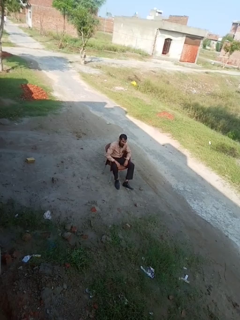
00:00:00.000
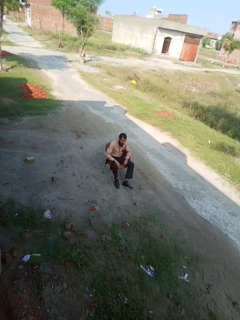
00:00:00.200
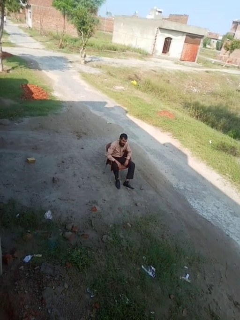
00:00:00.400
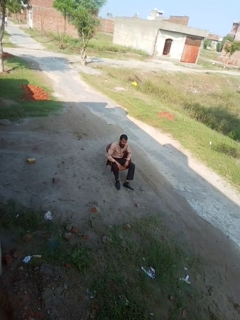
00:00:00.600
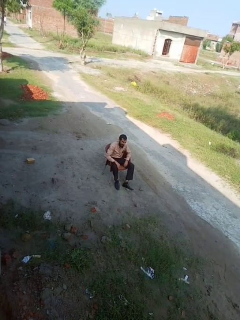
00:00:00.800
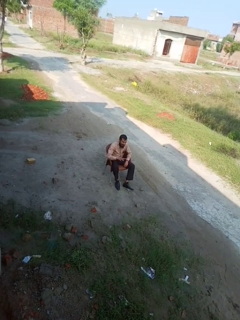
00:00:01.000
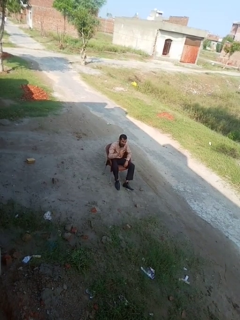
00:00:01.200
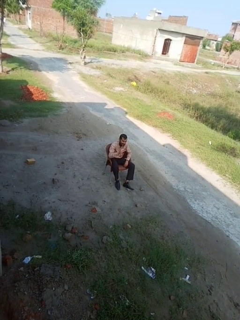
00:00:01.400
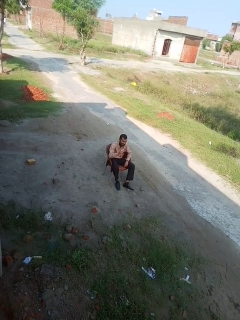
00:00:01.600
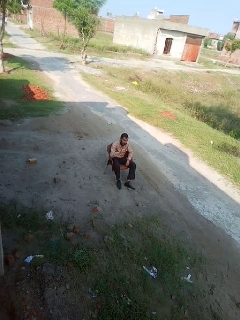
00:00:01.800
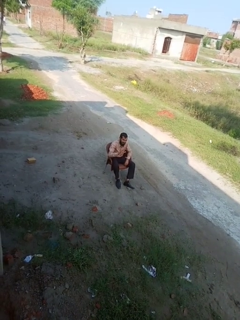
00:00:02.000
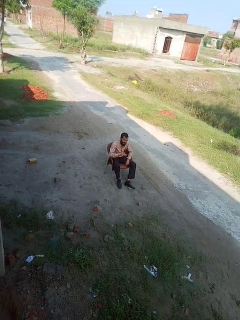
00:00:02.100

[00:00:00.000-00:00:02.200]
person gestures number five

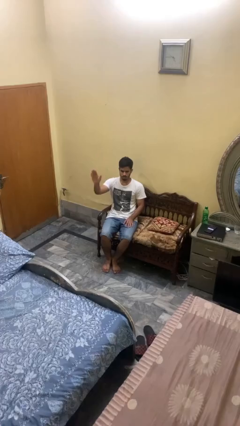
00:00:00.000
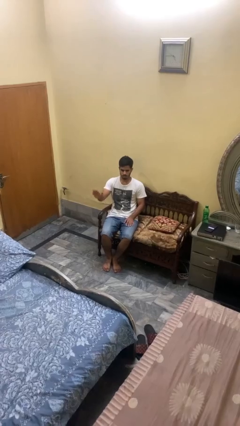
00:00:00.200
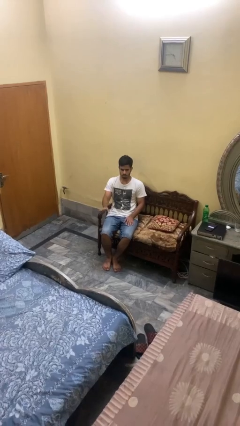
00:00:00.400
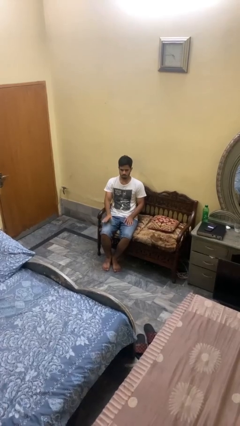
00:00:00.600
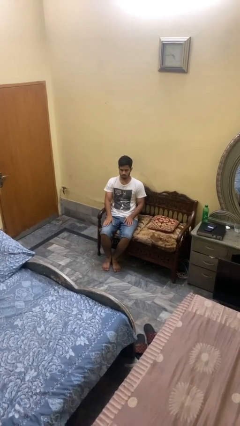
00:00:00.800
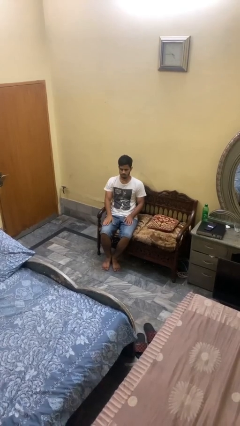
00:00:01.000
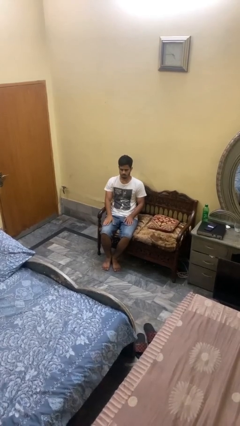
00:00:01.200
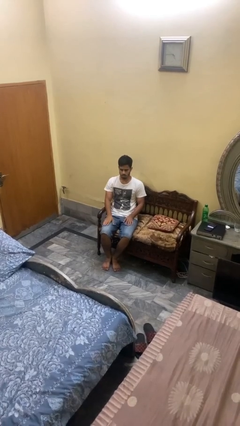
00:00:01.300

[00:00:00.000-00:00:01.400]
person gestures lower hand

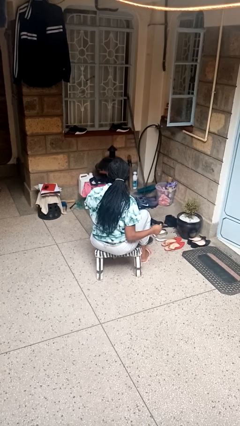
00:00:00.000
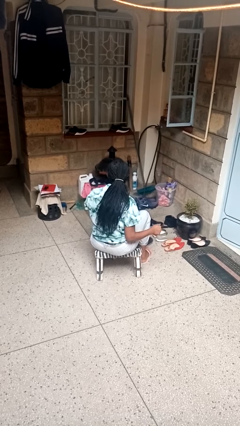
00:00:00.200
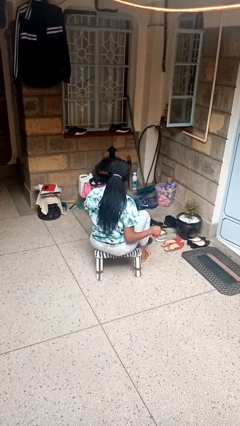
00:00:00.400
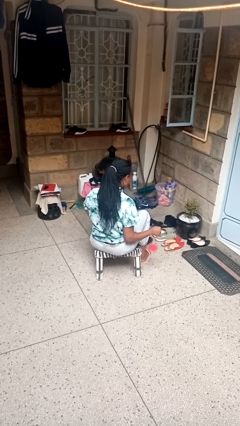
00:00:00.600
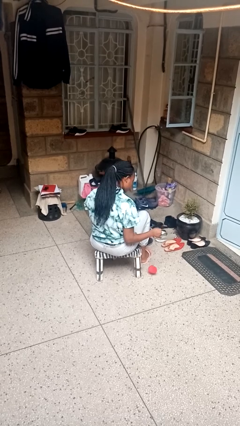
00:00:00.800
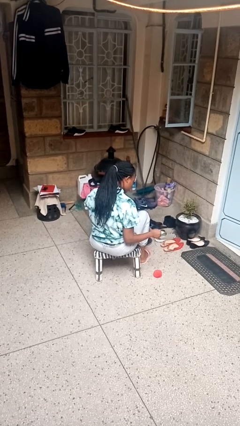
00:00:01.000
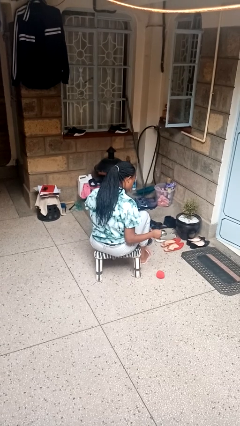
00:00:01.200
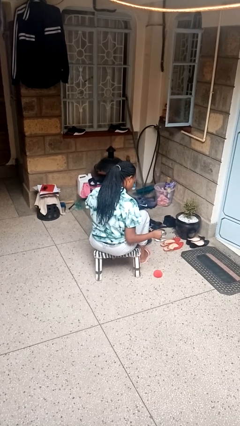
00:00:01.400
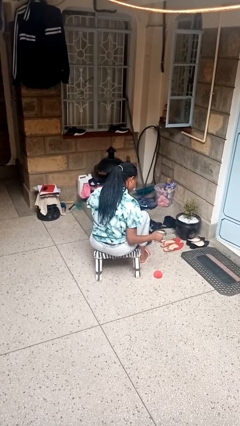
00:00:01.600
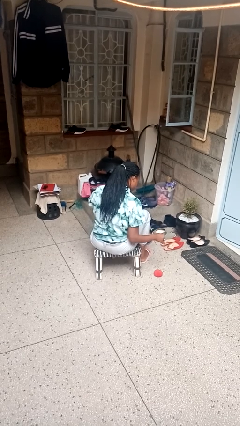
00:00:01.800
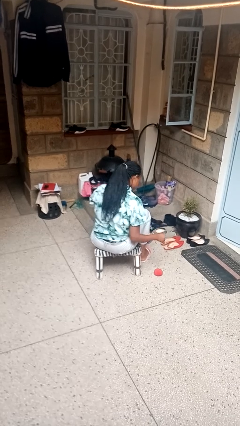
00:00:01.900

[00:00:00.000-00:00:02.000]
person drops object

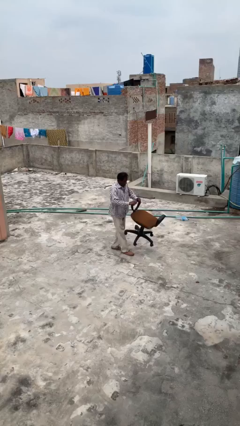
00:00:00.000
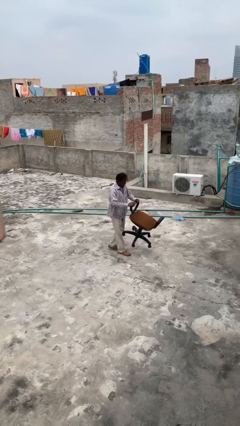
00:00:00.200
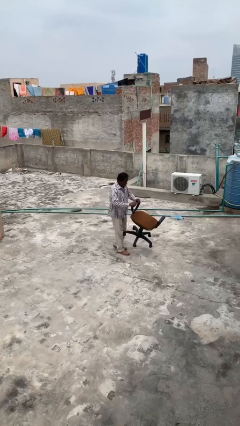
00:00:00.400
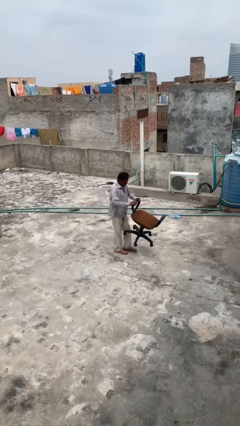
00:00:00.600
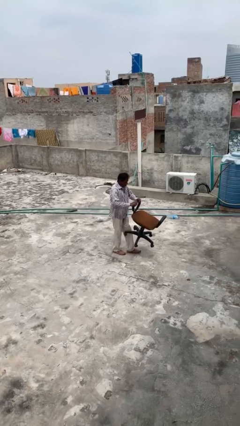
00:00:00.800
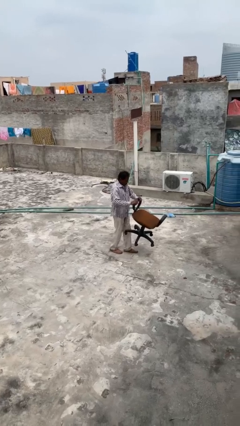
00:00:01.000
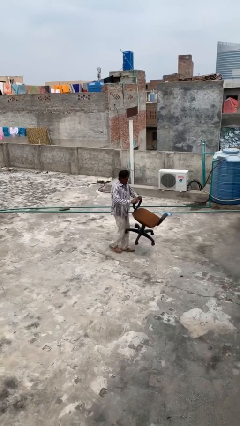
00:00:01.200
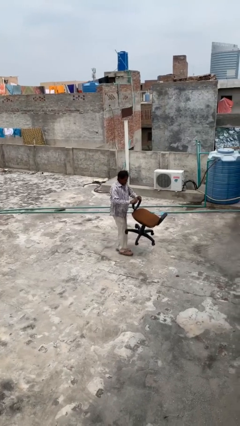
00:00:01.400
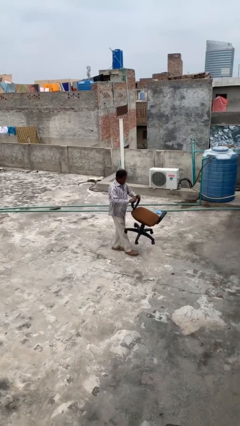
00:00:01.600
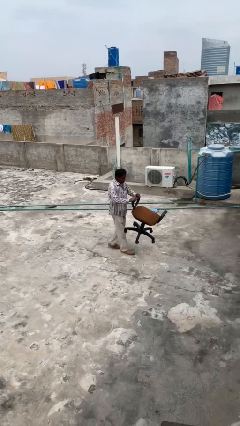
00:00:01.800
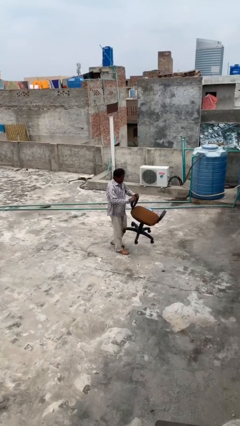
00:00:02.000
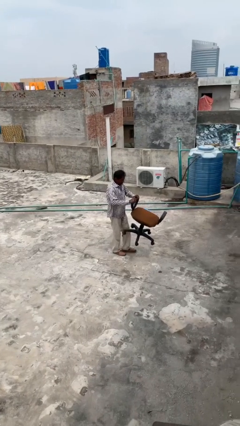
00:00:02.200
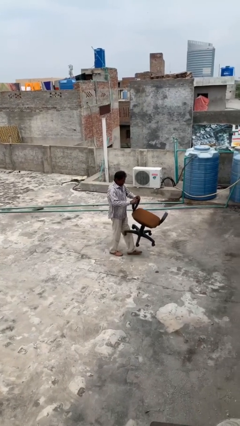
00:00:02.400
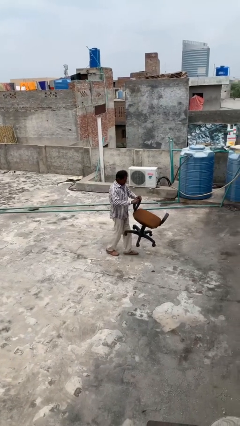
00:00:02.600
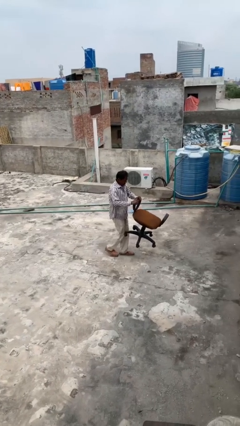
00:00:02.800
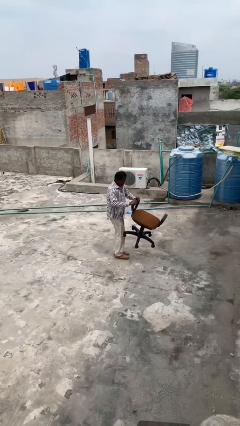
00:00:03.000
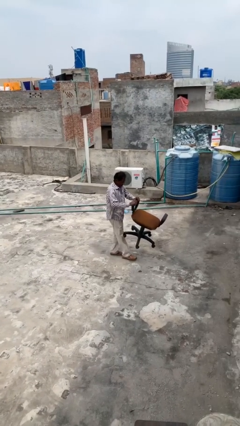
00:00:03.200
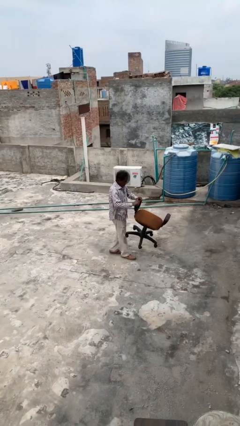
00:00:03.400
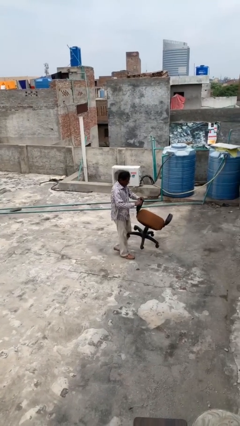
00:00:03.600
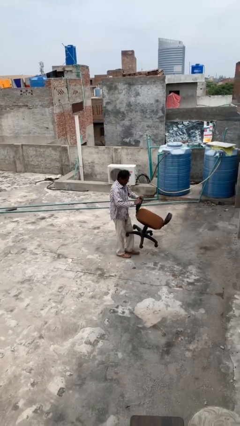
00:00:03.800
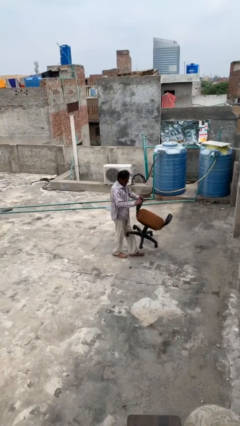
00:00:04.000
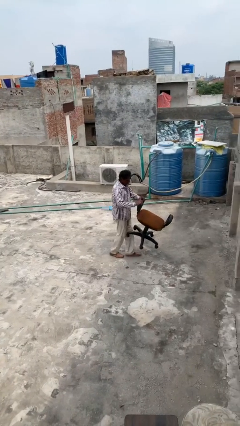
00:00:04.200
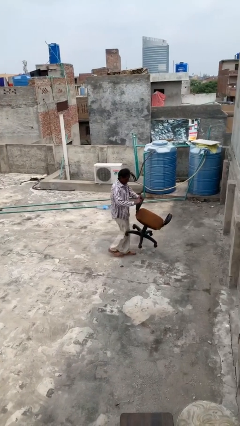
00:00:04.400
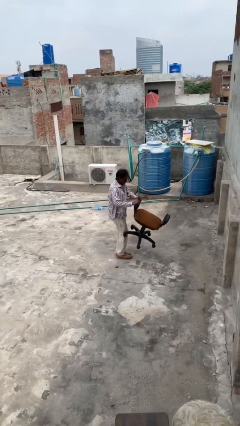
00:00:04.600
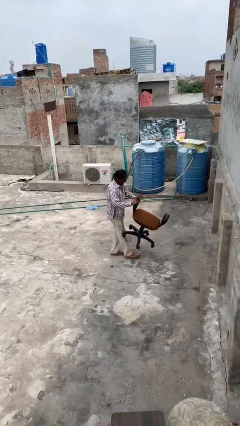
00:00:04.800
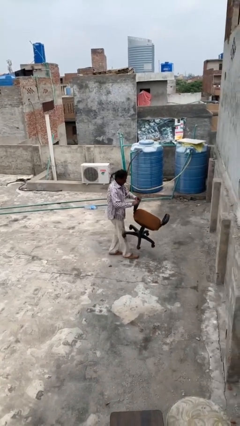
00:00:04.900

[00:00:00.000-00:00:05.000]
person carries heavy object

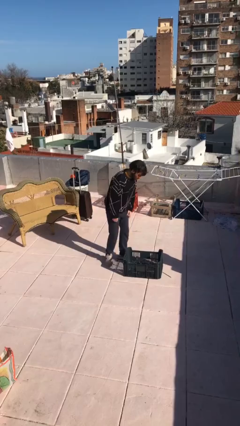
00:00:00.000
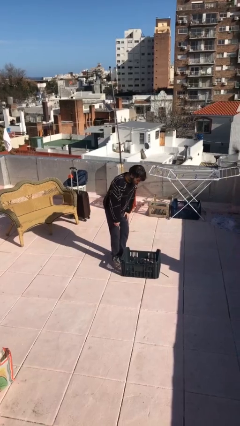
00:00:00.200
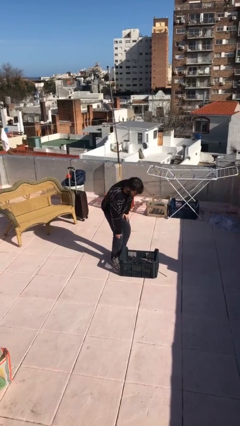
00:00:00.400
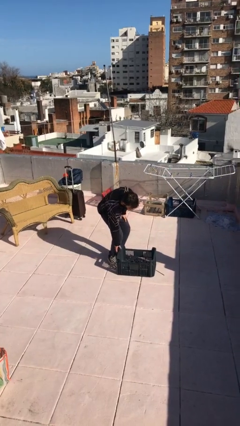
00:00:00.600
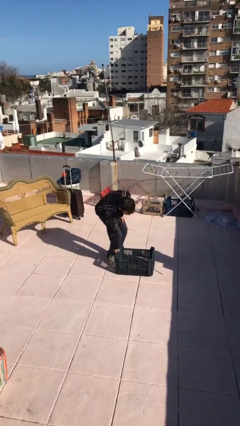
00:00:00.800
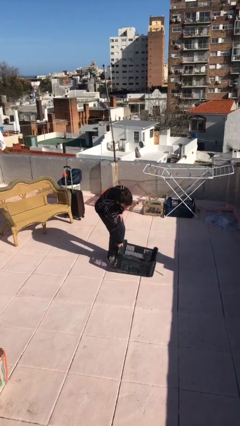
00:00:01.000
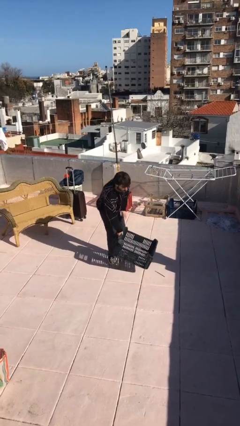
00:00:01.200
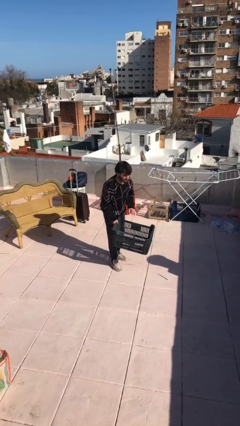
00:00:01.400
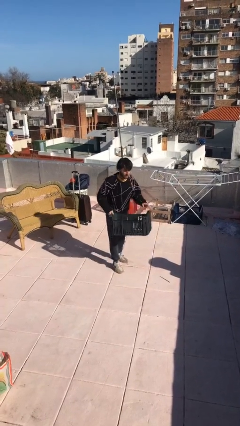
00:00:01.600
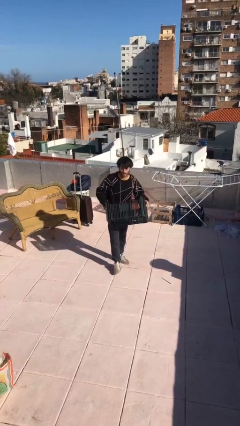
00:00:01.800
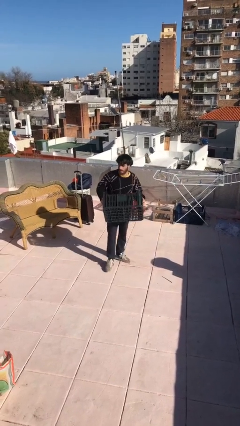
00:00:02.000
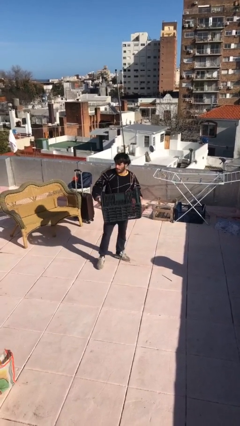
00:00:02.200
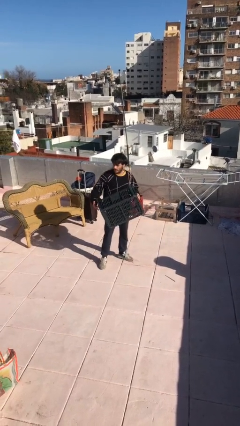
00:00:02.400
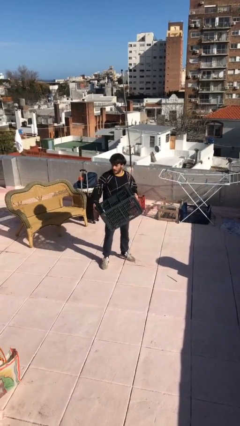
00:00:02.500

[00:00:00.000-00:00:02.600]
person picks up object from floor

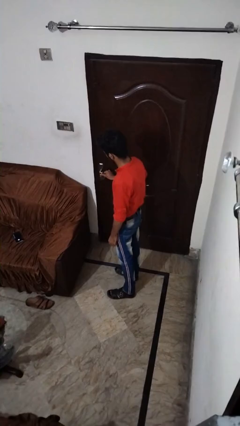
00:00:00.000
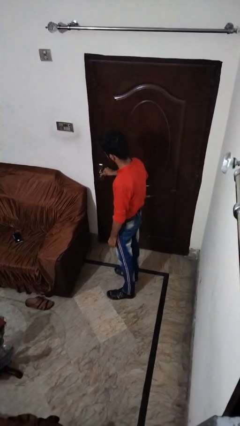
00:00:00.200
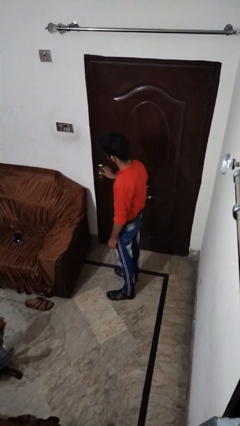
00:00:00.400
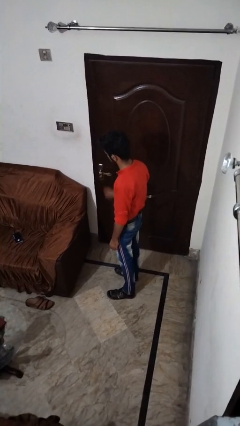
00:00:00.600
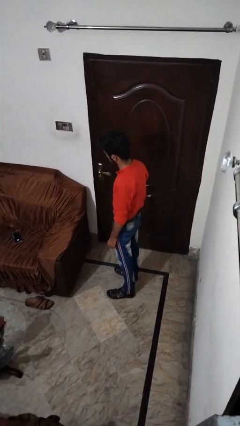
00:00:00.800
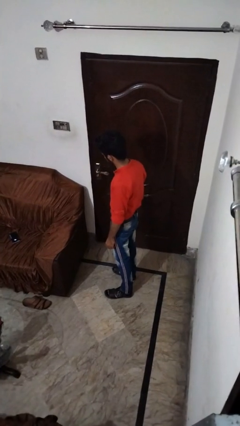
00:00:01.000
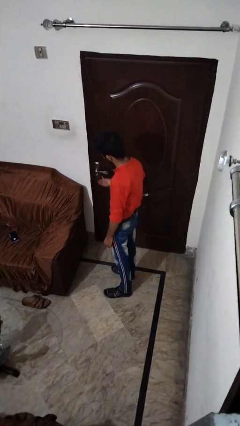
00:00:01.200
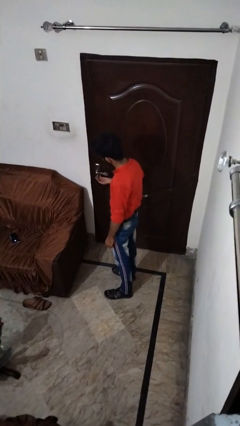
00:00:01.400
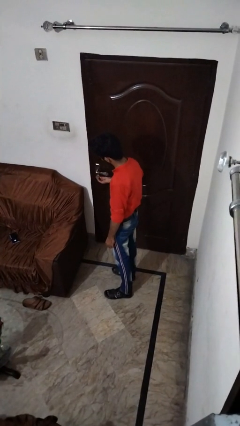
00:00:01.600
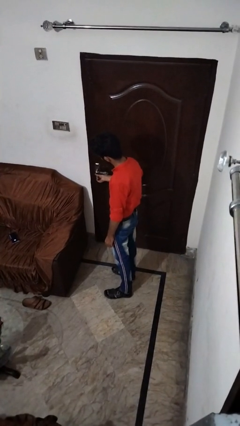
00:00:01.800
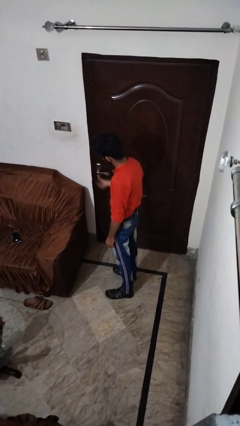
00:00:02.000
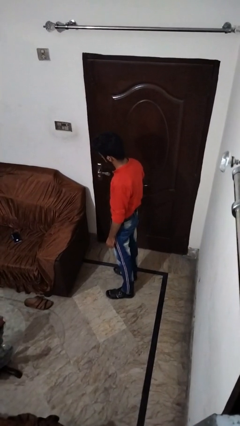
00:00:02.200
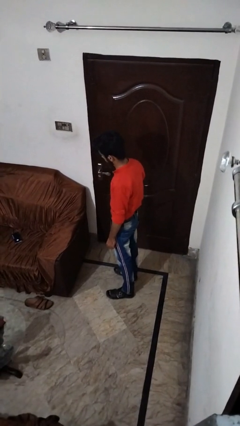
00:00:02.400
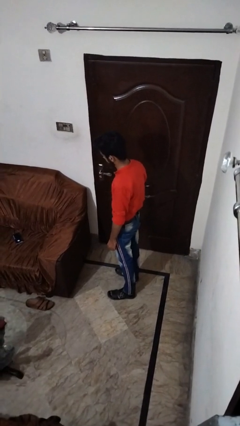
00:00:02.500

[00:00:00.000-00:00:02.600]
person locks door with keys

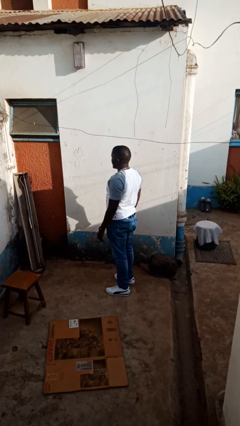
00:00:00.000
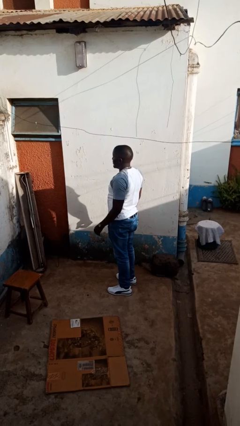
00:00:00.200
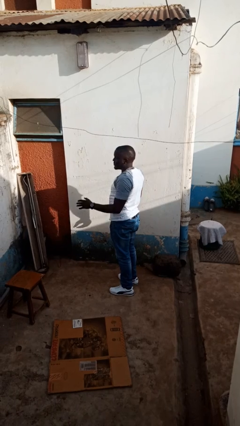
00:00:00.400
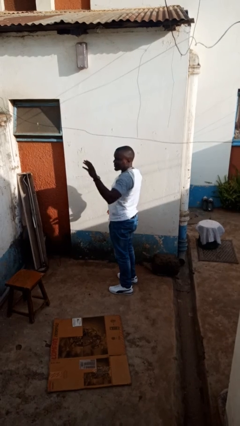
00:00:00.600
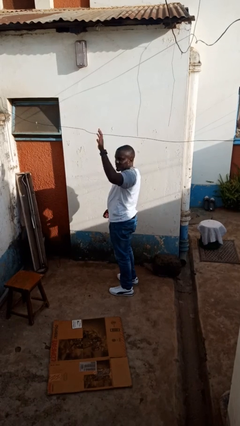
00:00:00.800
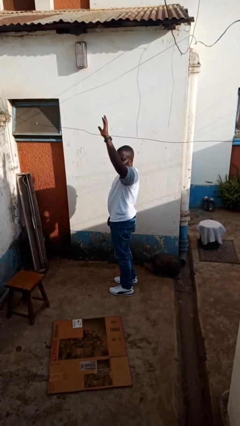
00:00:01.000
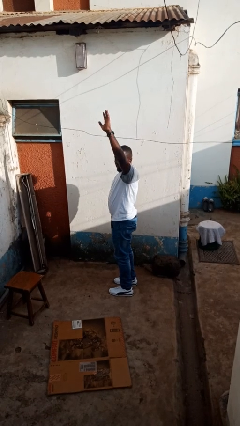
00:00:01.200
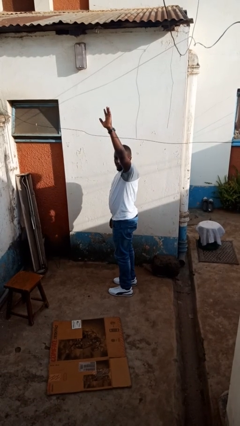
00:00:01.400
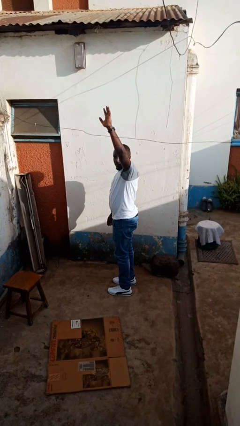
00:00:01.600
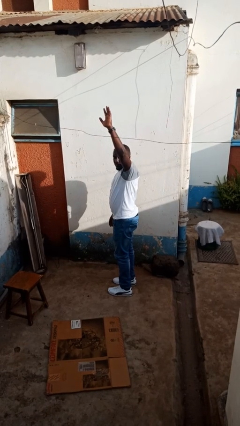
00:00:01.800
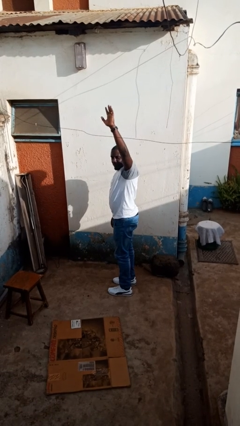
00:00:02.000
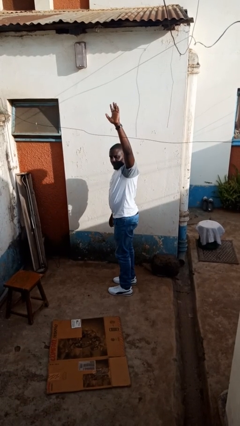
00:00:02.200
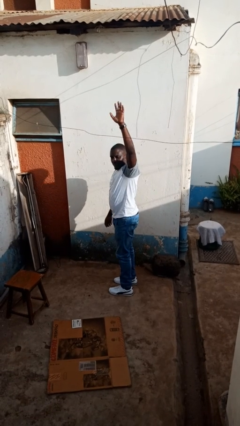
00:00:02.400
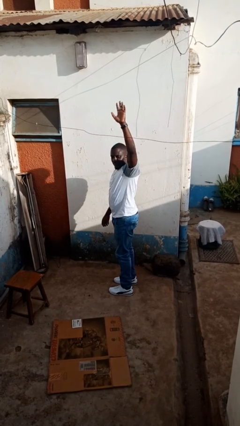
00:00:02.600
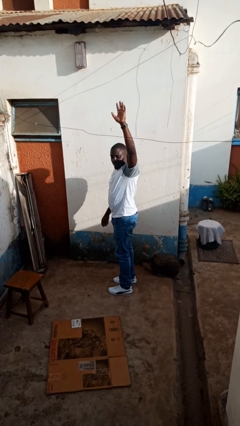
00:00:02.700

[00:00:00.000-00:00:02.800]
person gestures raise hand
